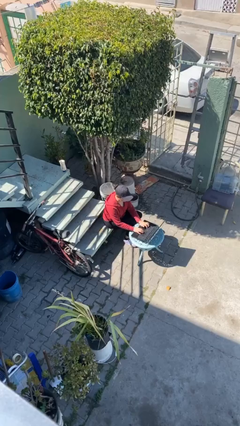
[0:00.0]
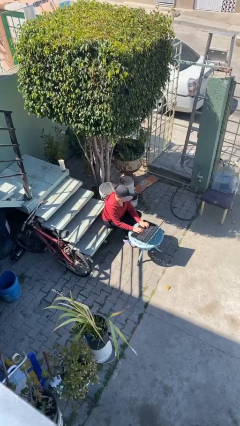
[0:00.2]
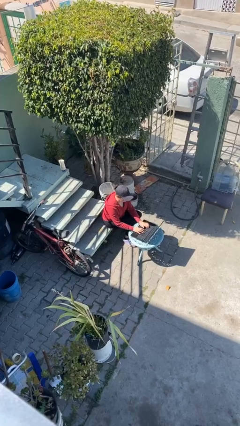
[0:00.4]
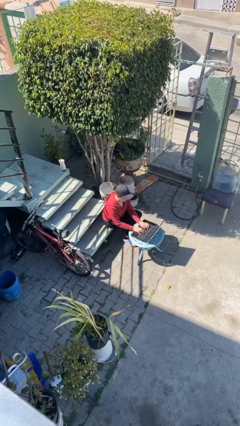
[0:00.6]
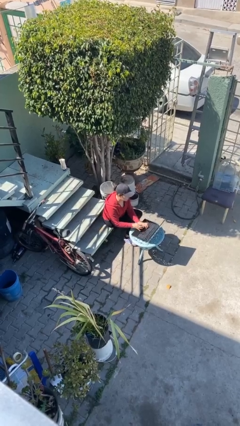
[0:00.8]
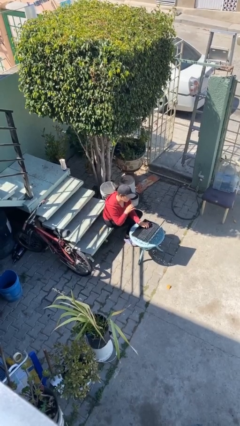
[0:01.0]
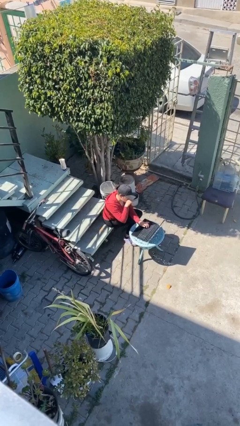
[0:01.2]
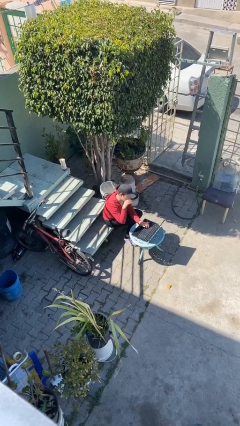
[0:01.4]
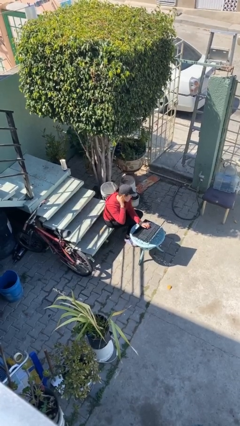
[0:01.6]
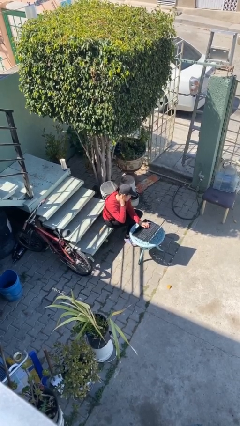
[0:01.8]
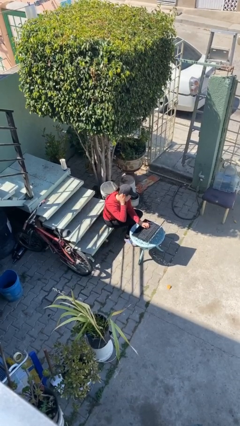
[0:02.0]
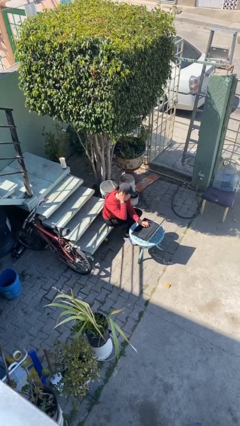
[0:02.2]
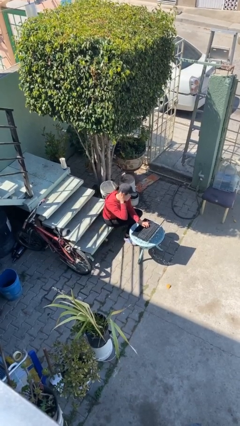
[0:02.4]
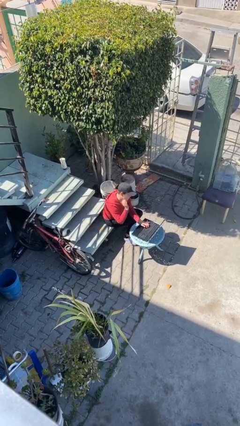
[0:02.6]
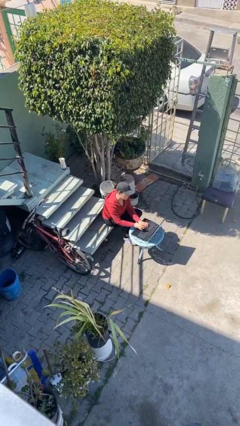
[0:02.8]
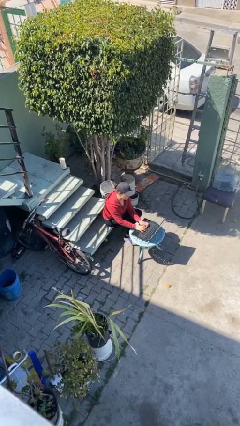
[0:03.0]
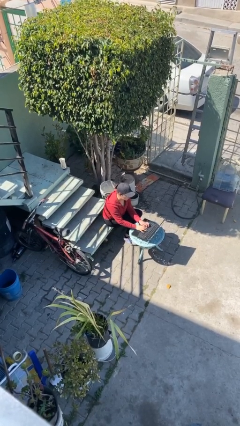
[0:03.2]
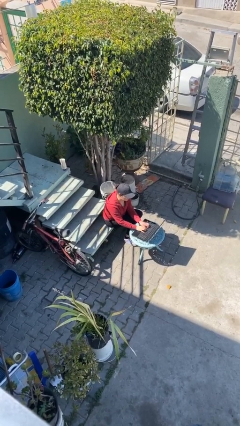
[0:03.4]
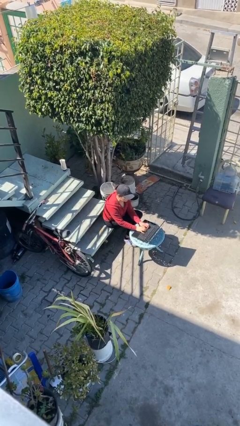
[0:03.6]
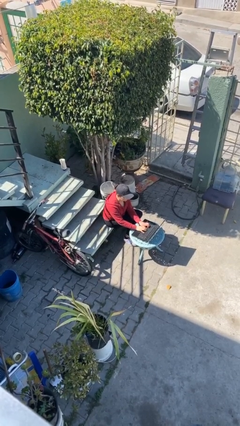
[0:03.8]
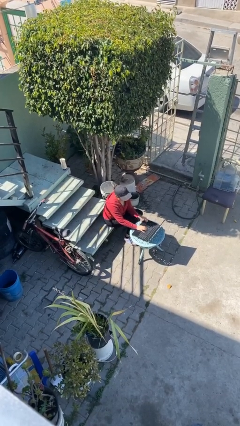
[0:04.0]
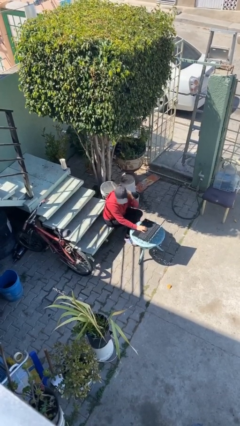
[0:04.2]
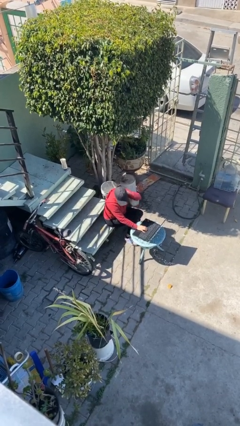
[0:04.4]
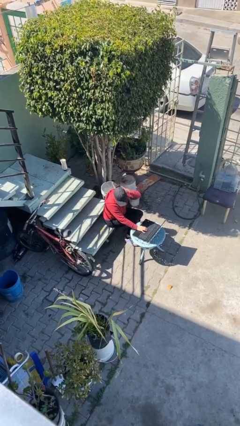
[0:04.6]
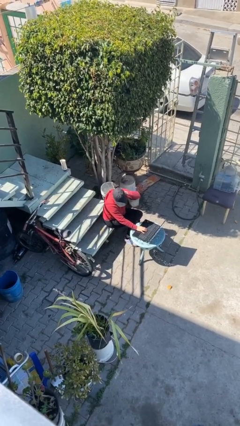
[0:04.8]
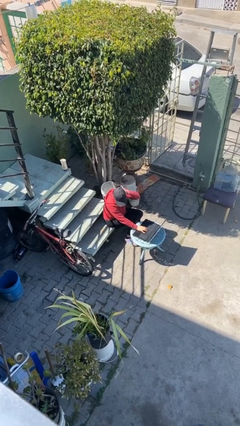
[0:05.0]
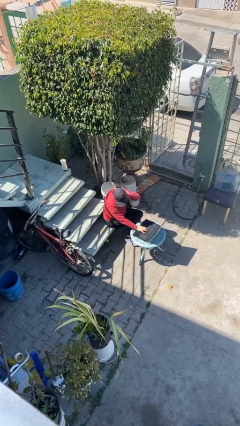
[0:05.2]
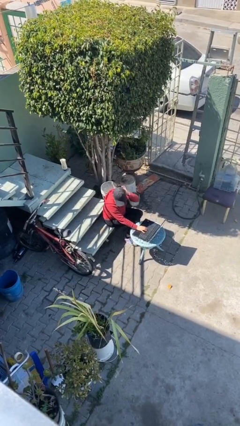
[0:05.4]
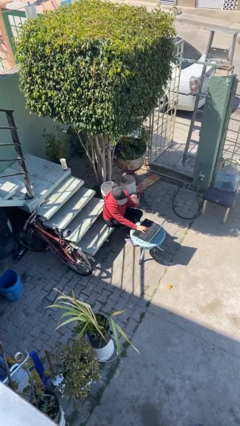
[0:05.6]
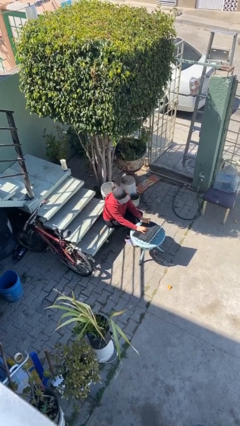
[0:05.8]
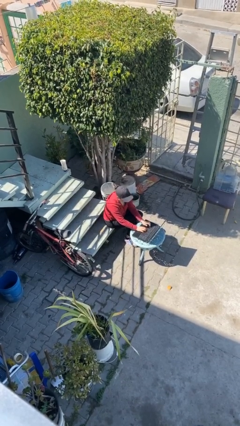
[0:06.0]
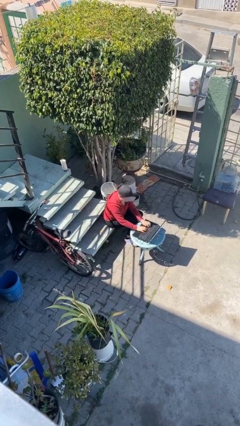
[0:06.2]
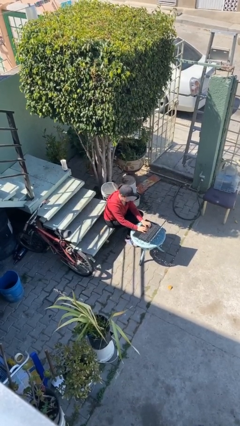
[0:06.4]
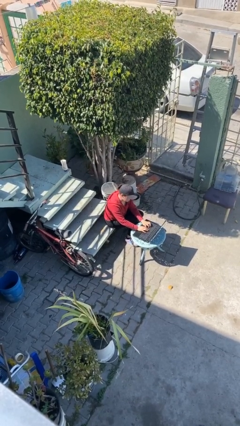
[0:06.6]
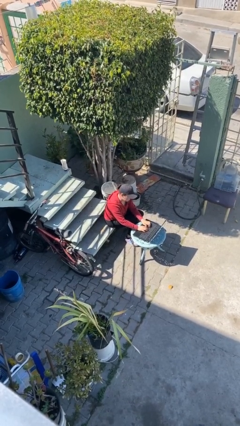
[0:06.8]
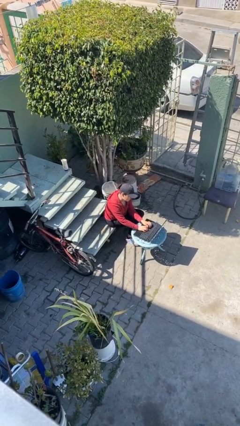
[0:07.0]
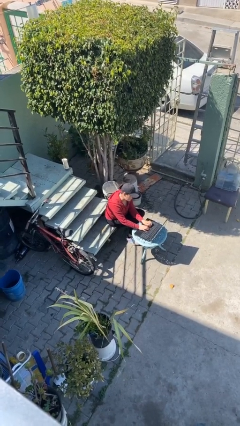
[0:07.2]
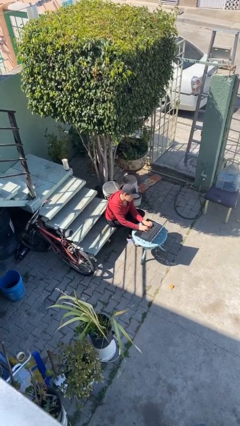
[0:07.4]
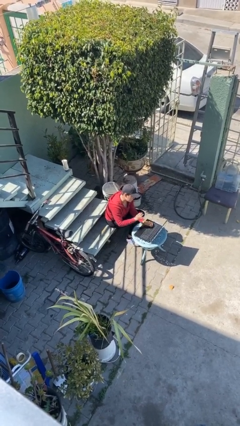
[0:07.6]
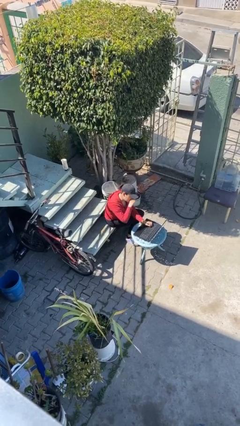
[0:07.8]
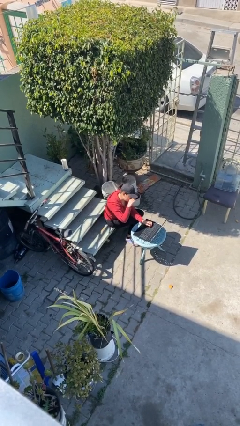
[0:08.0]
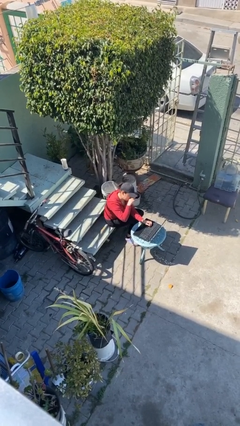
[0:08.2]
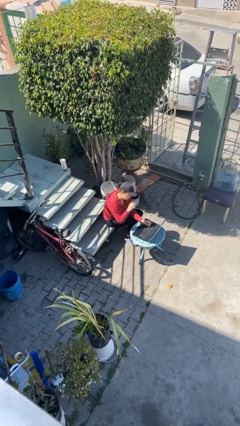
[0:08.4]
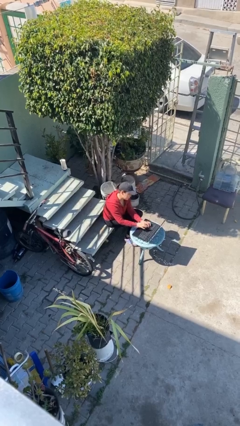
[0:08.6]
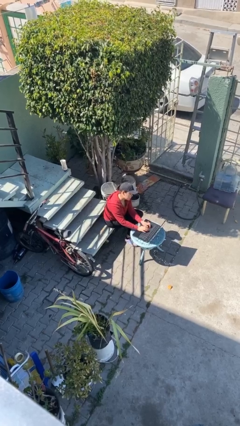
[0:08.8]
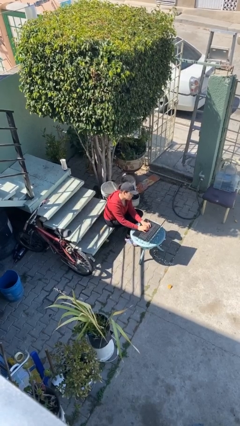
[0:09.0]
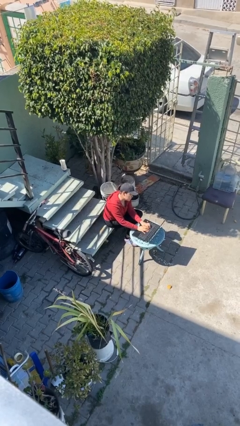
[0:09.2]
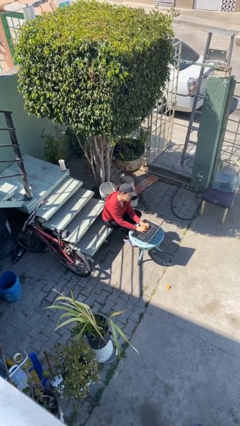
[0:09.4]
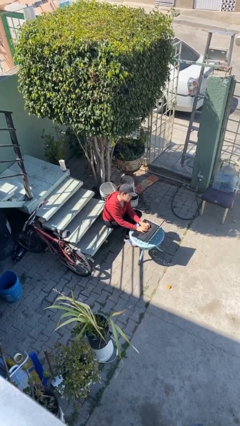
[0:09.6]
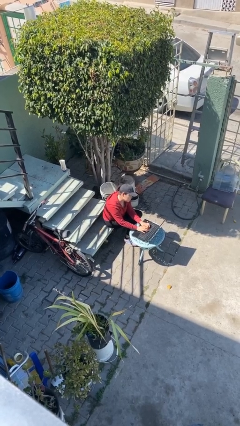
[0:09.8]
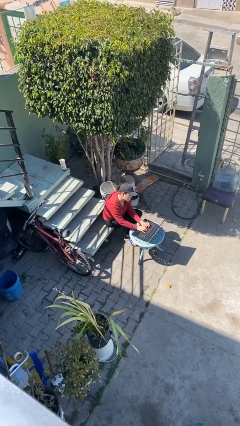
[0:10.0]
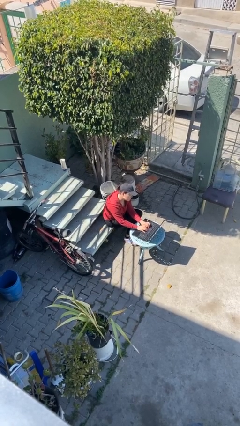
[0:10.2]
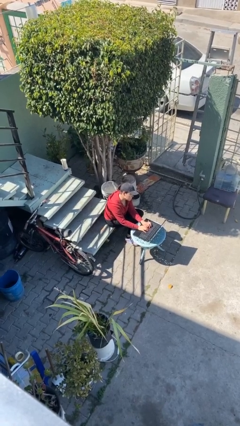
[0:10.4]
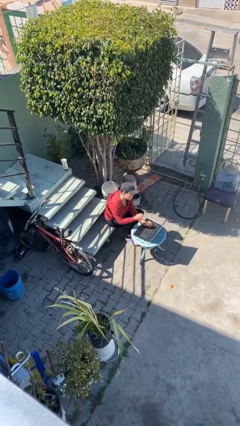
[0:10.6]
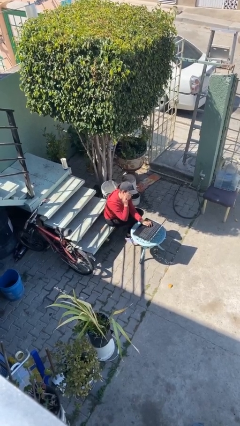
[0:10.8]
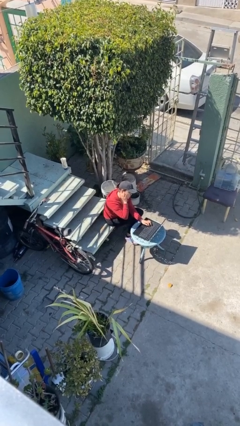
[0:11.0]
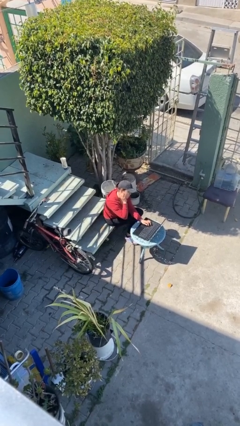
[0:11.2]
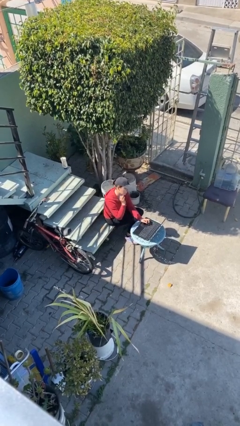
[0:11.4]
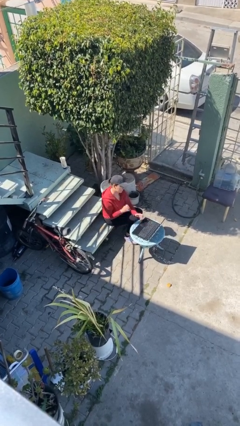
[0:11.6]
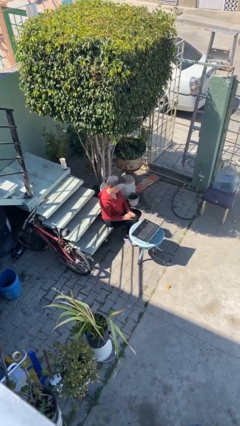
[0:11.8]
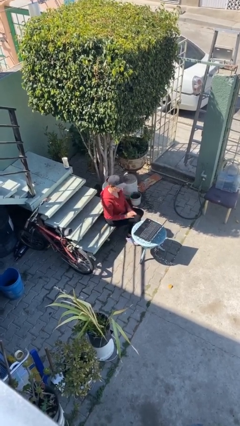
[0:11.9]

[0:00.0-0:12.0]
person interacts with laptop

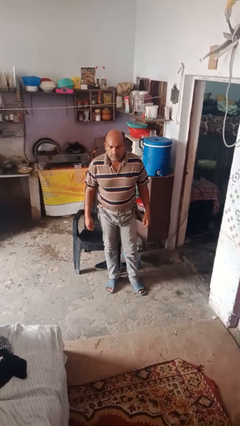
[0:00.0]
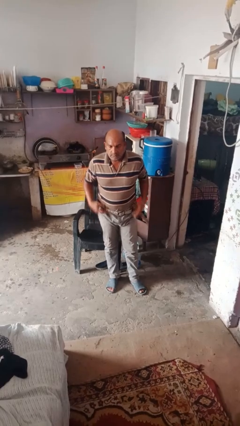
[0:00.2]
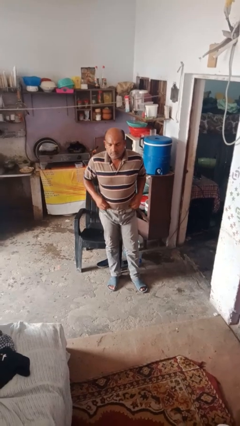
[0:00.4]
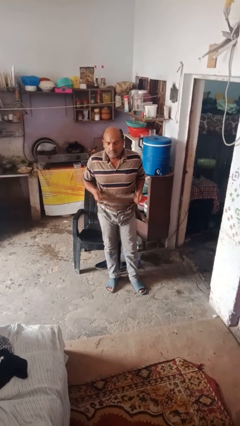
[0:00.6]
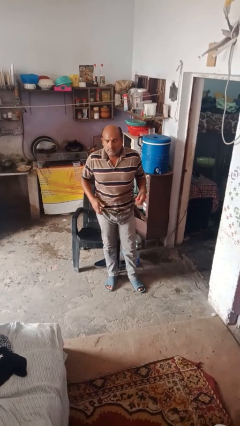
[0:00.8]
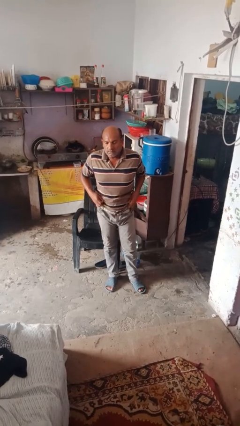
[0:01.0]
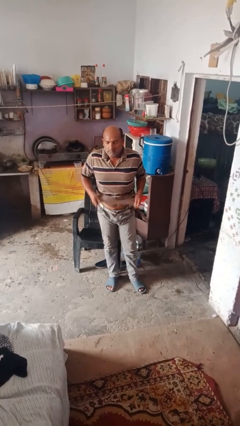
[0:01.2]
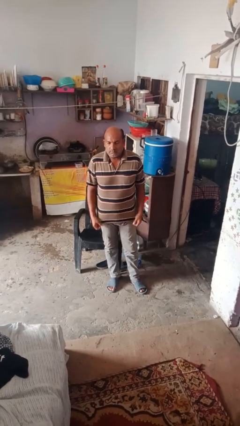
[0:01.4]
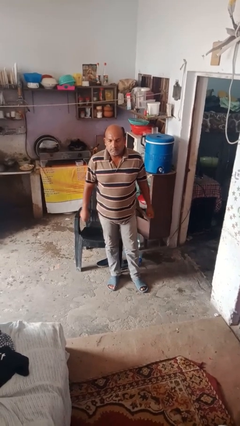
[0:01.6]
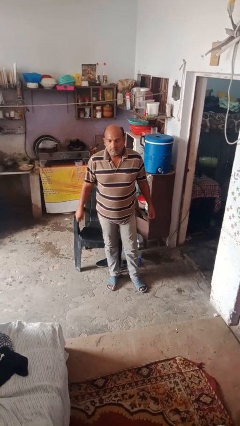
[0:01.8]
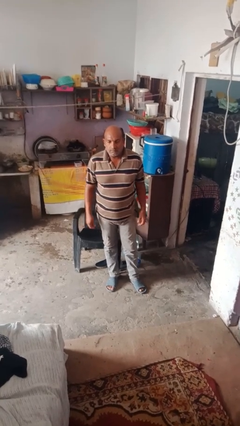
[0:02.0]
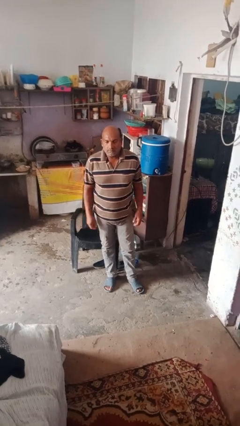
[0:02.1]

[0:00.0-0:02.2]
person untucks shirt

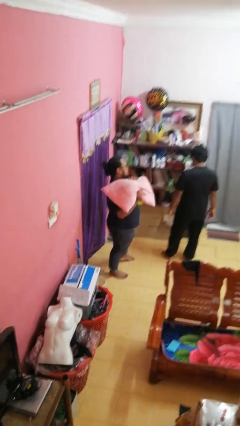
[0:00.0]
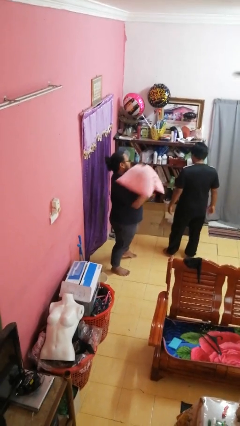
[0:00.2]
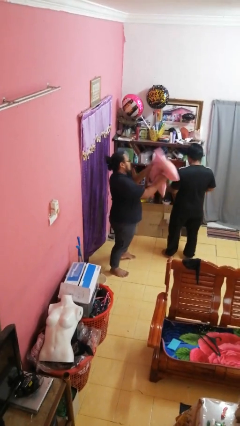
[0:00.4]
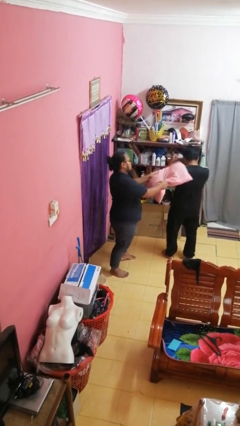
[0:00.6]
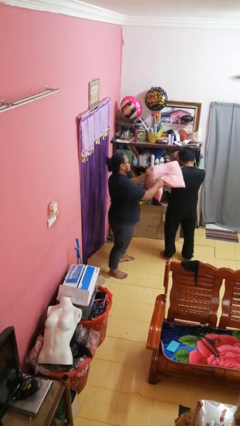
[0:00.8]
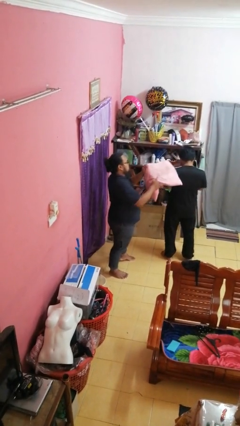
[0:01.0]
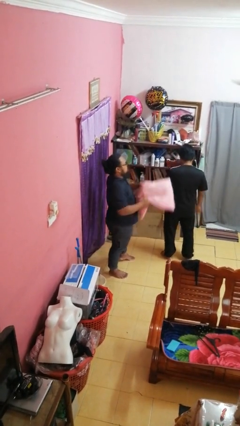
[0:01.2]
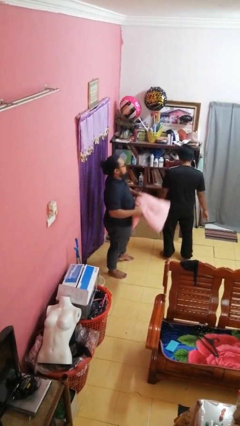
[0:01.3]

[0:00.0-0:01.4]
person hits person with pillow

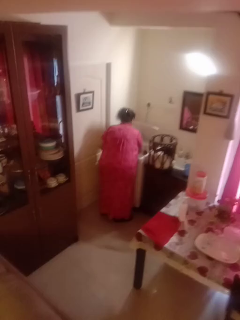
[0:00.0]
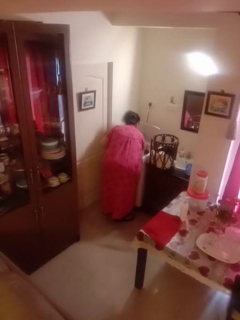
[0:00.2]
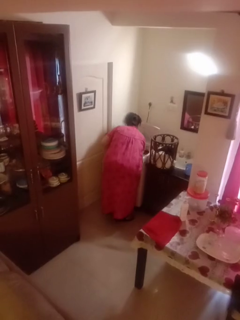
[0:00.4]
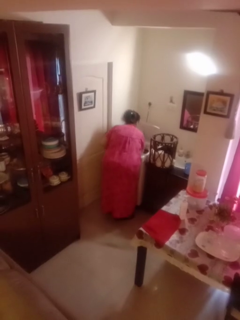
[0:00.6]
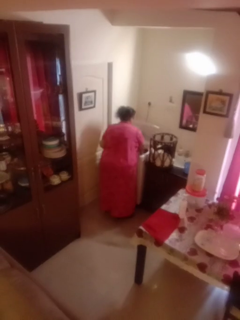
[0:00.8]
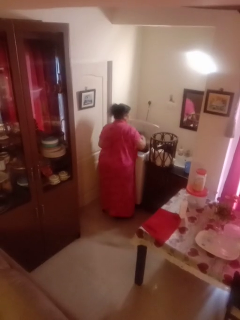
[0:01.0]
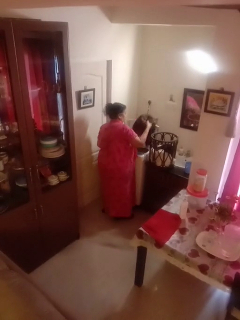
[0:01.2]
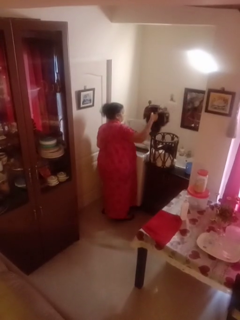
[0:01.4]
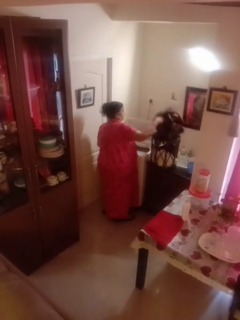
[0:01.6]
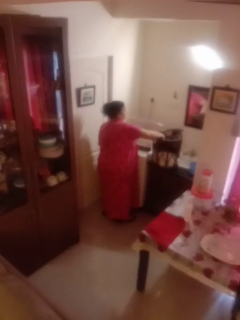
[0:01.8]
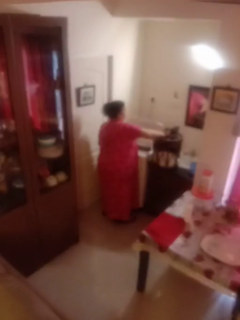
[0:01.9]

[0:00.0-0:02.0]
person unloads clotheswasher

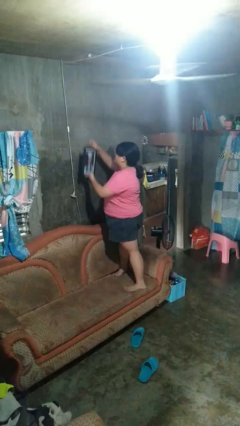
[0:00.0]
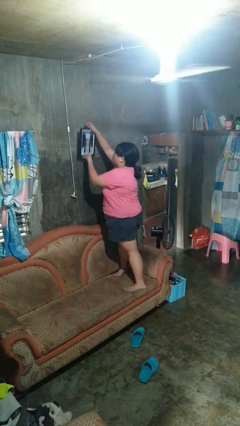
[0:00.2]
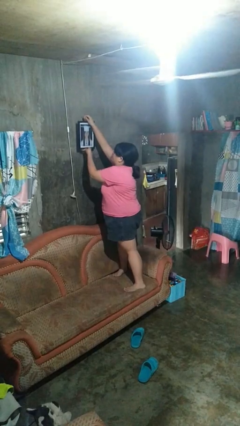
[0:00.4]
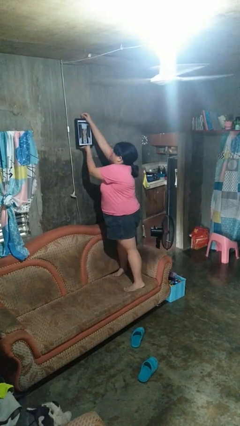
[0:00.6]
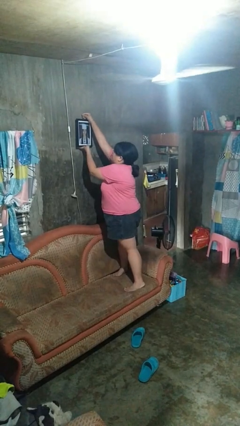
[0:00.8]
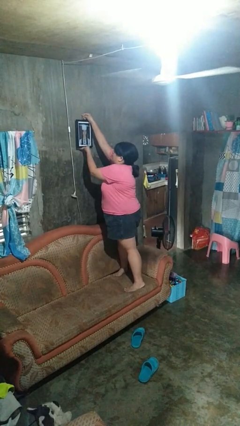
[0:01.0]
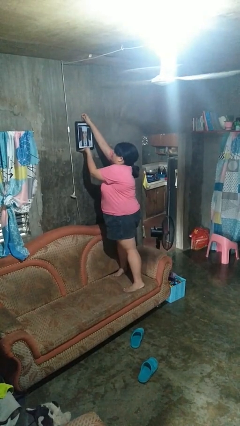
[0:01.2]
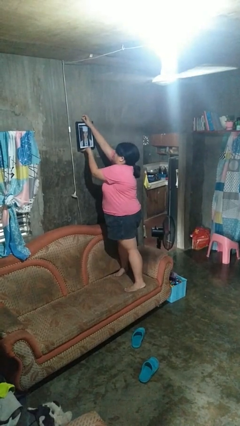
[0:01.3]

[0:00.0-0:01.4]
person puts up picture frame
